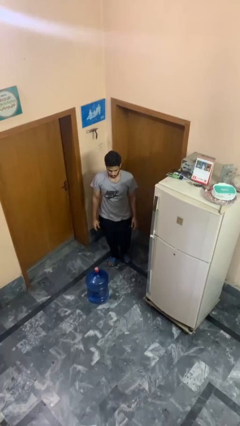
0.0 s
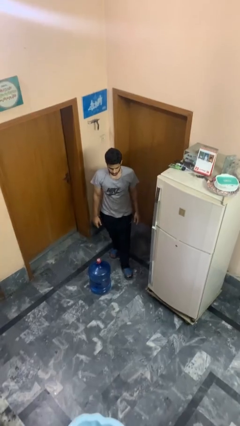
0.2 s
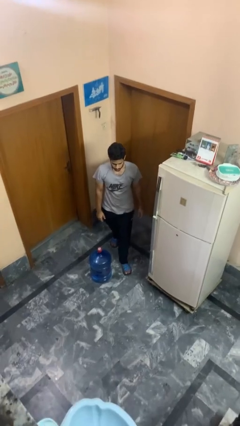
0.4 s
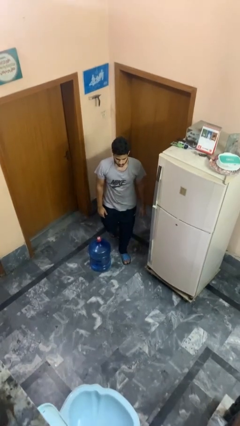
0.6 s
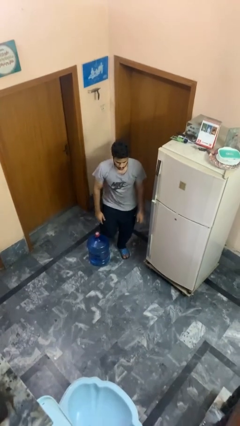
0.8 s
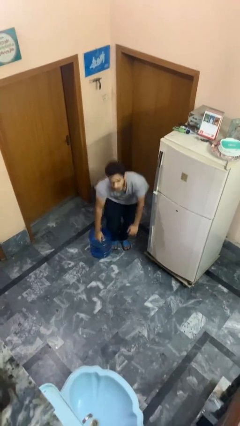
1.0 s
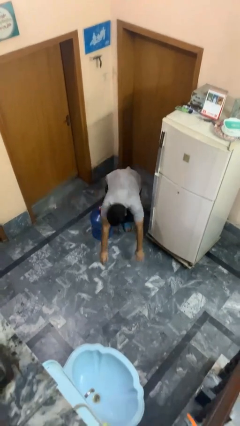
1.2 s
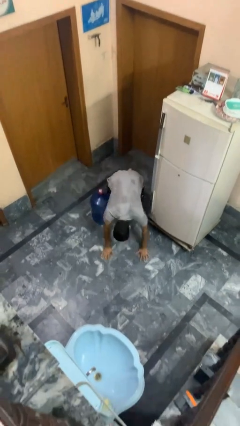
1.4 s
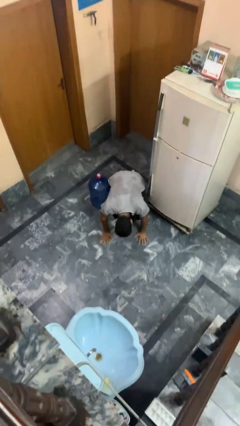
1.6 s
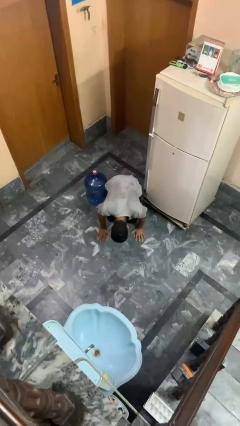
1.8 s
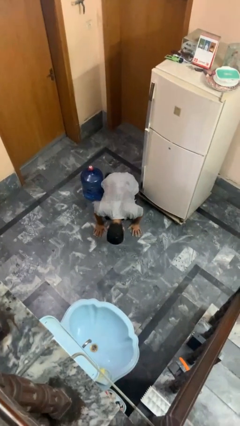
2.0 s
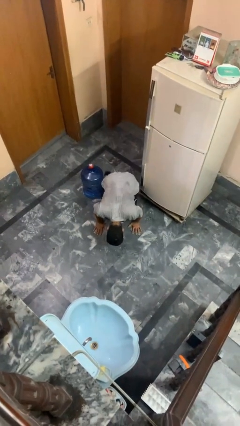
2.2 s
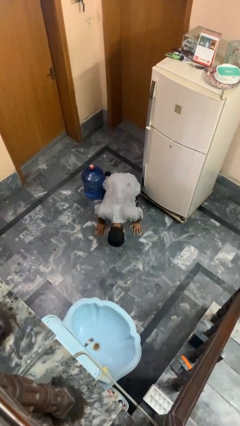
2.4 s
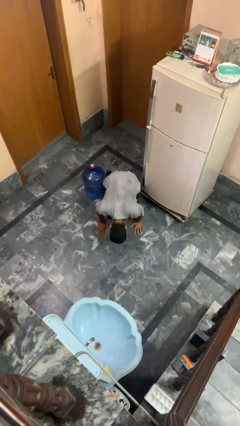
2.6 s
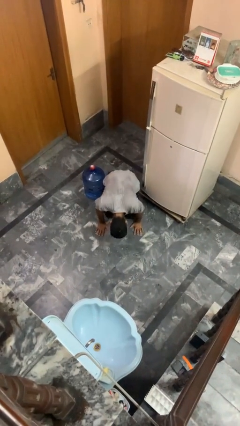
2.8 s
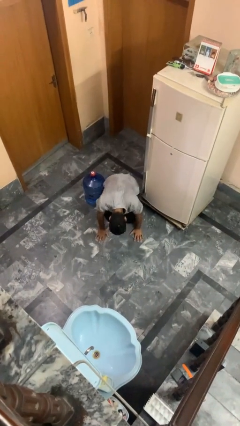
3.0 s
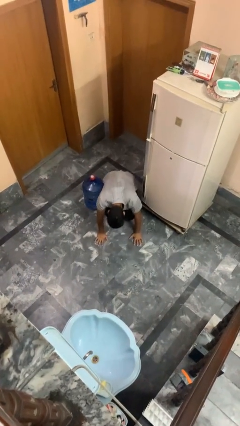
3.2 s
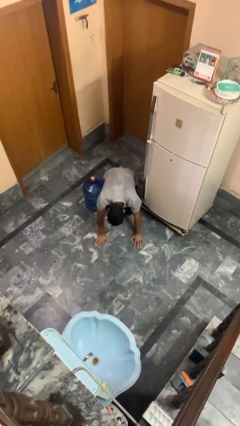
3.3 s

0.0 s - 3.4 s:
person trips on object on floor

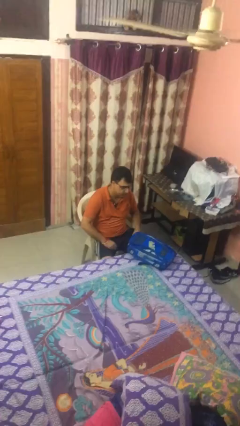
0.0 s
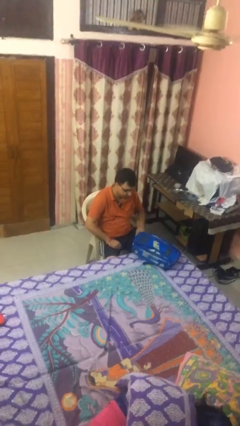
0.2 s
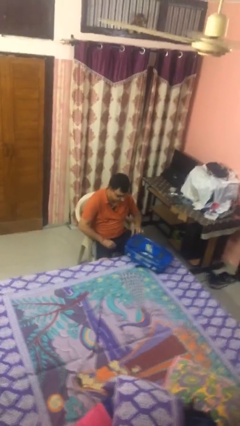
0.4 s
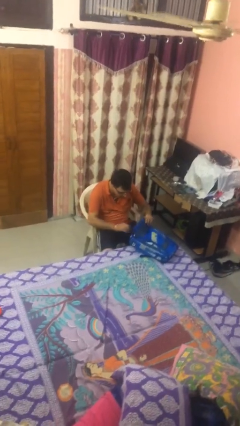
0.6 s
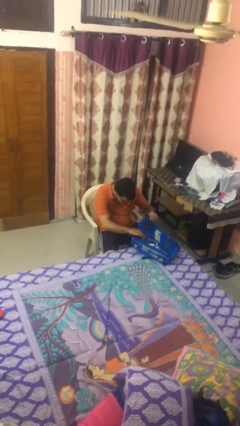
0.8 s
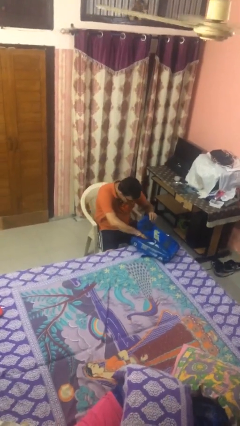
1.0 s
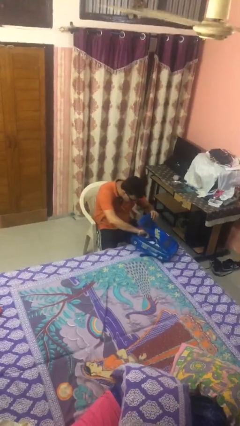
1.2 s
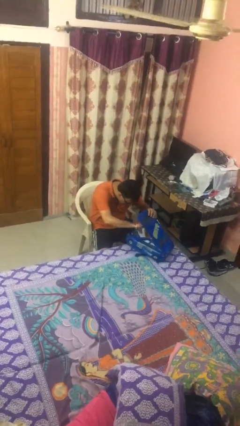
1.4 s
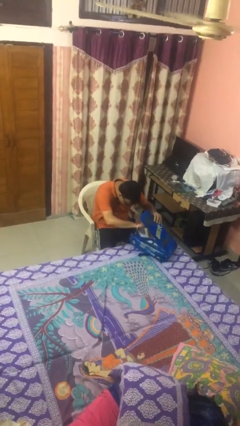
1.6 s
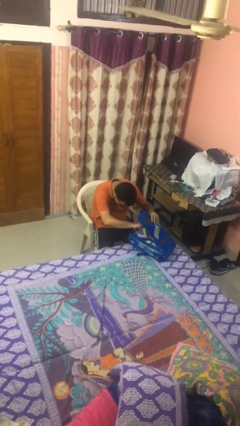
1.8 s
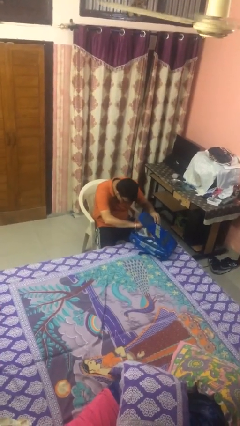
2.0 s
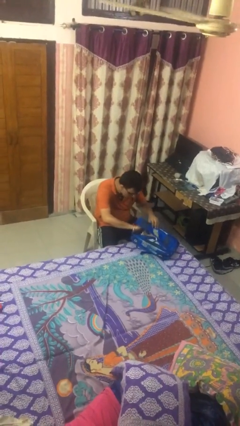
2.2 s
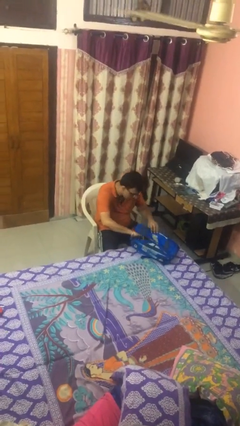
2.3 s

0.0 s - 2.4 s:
person searches in bag

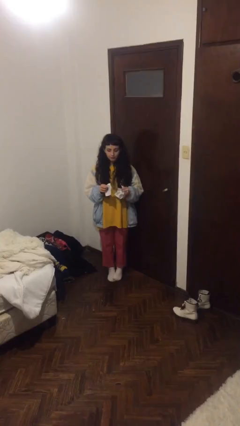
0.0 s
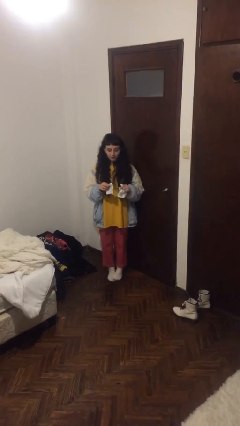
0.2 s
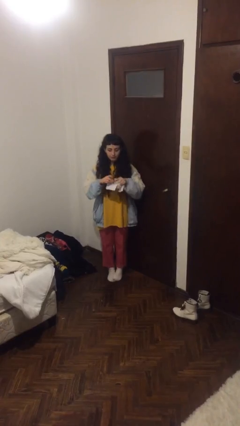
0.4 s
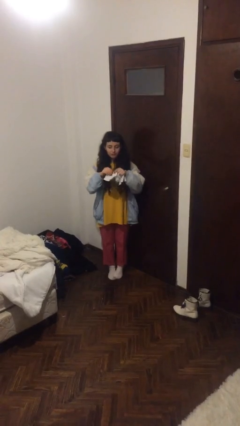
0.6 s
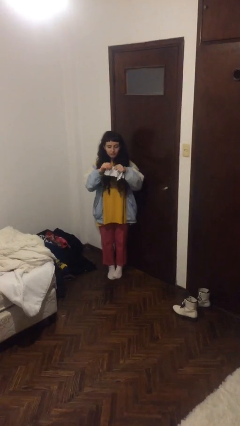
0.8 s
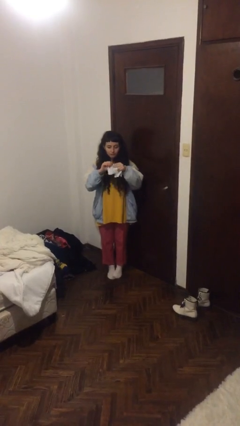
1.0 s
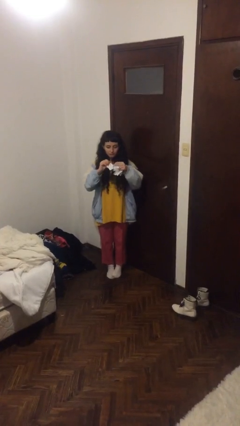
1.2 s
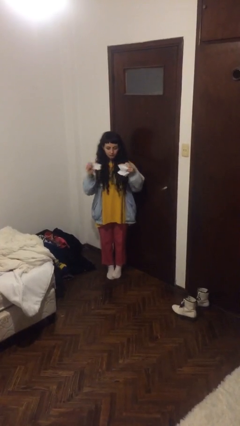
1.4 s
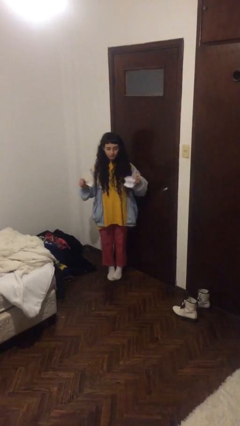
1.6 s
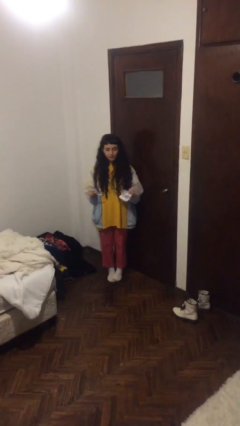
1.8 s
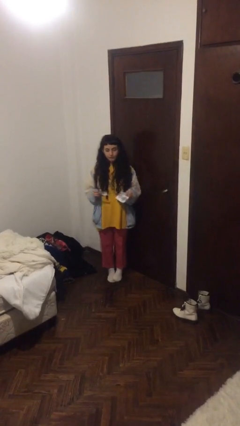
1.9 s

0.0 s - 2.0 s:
person tears paper

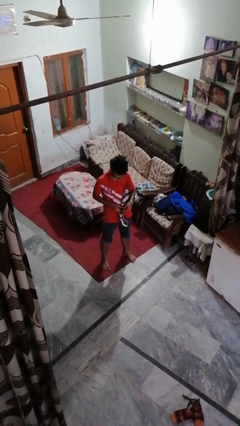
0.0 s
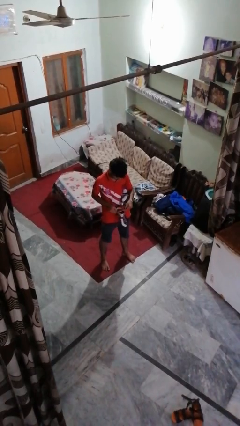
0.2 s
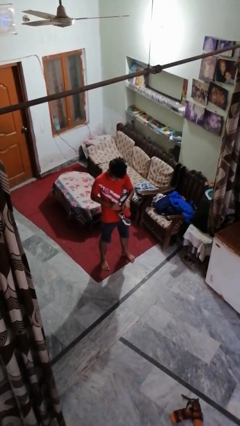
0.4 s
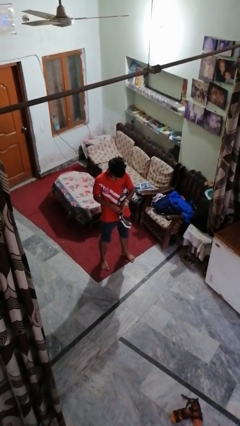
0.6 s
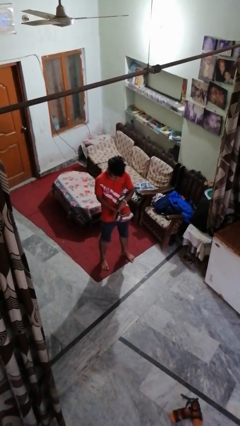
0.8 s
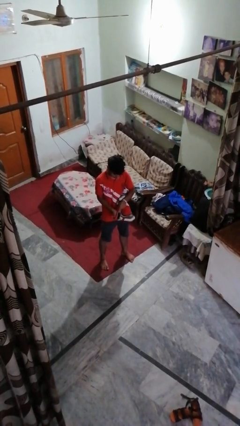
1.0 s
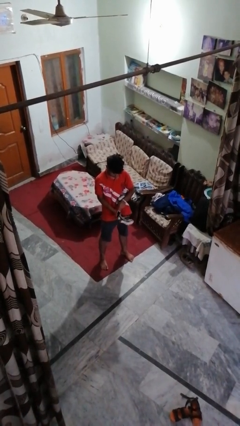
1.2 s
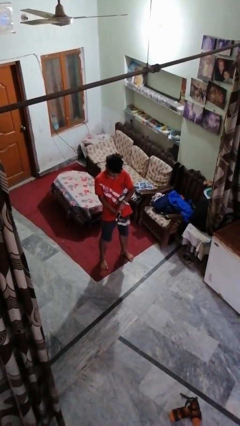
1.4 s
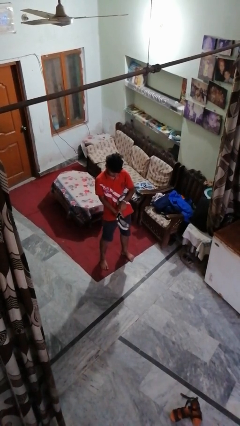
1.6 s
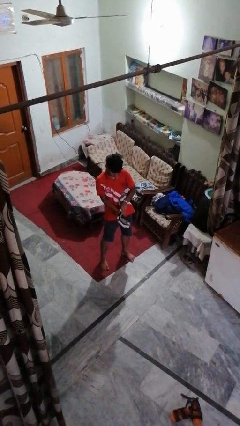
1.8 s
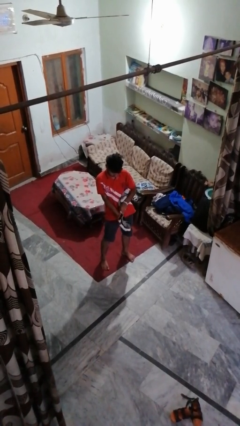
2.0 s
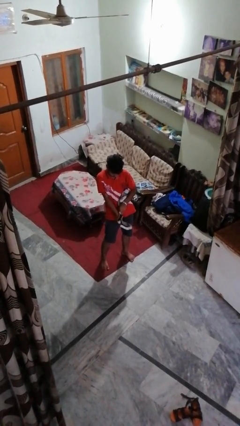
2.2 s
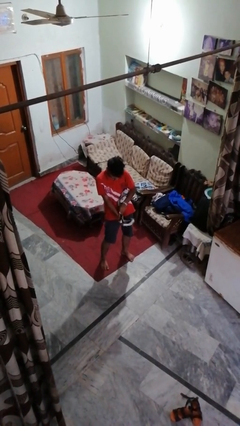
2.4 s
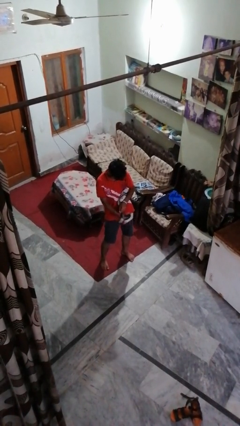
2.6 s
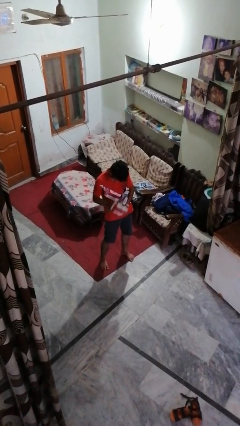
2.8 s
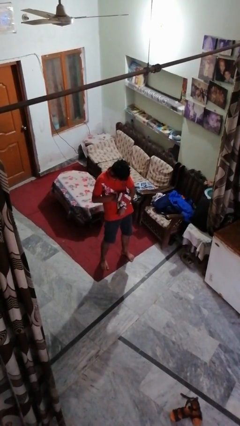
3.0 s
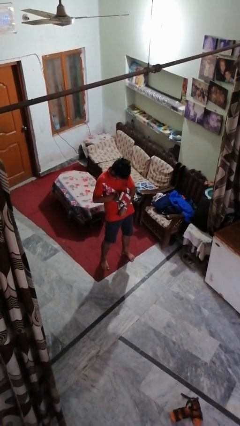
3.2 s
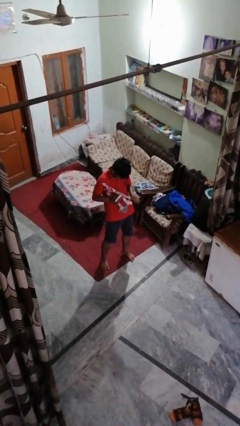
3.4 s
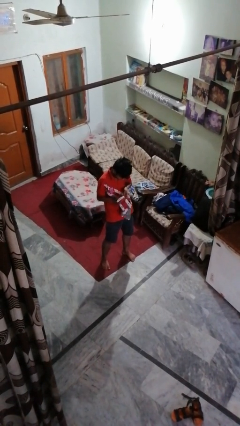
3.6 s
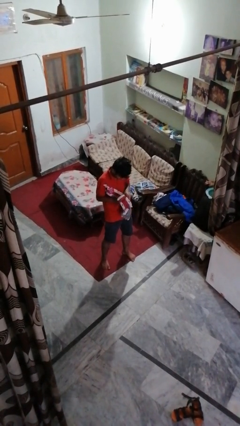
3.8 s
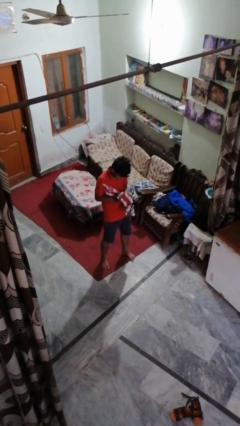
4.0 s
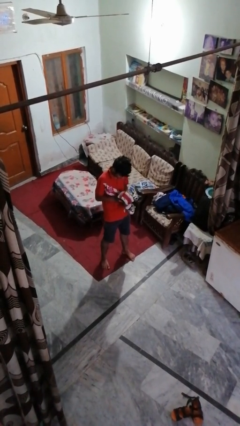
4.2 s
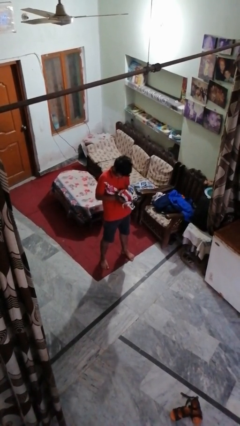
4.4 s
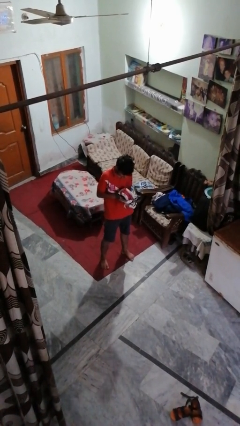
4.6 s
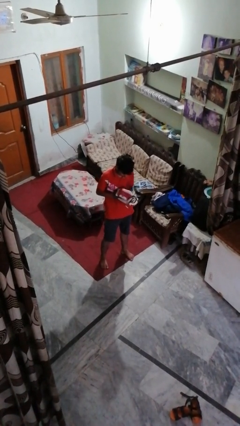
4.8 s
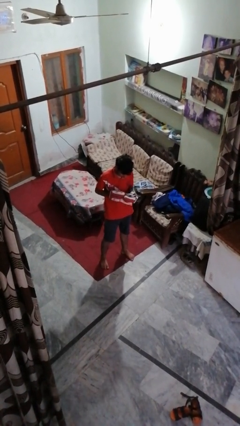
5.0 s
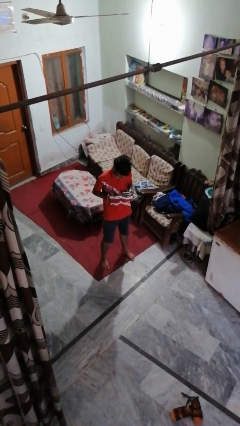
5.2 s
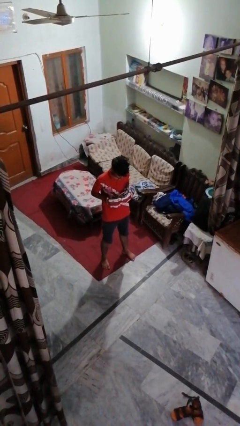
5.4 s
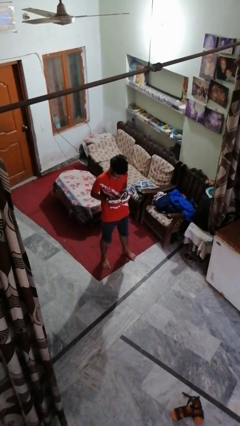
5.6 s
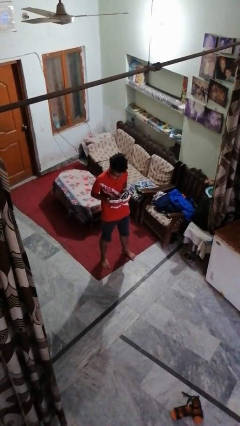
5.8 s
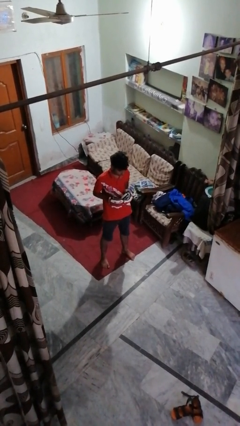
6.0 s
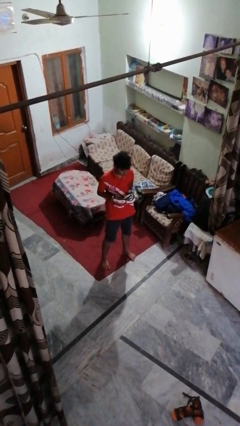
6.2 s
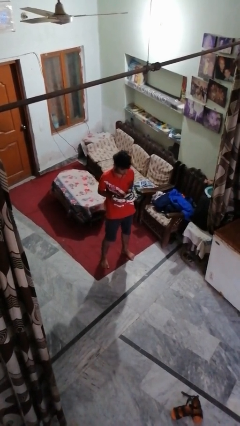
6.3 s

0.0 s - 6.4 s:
person puts on gloves

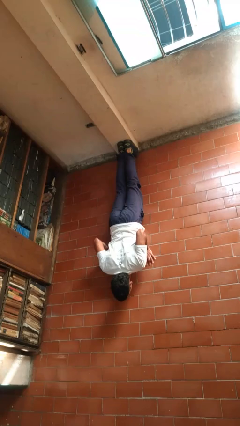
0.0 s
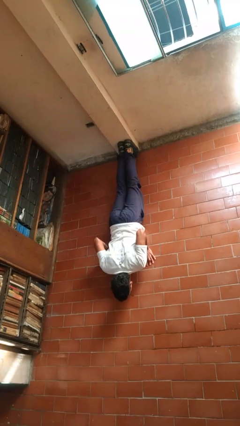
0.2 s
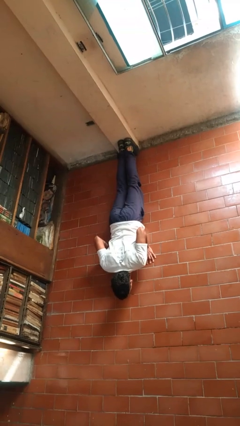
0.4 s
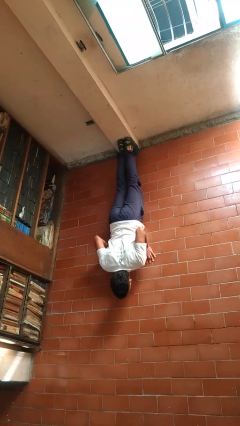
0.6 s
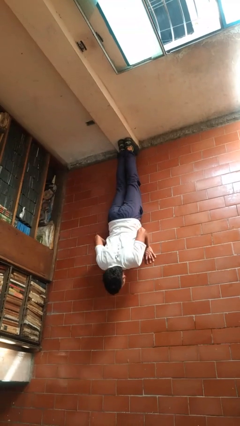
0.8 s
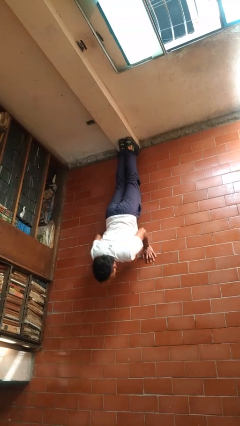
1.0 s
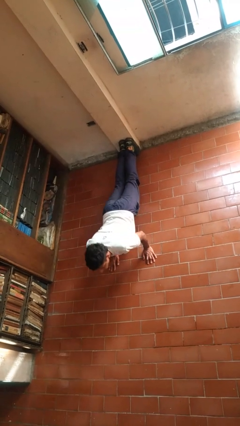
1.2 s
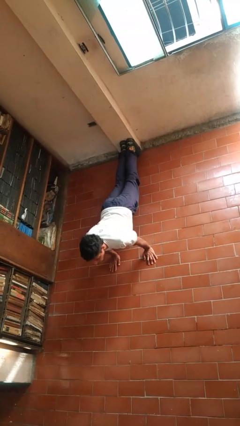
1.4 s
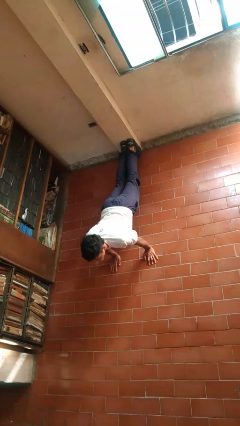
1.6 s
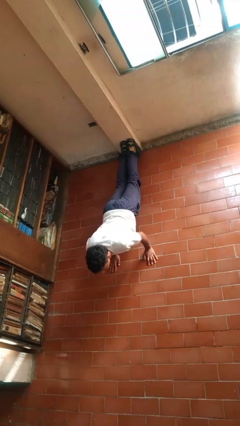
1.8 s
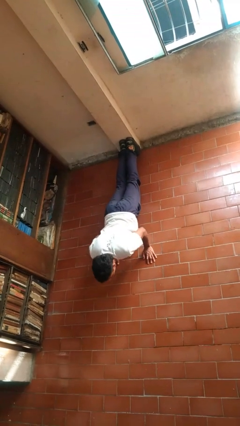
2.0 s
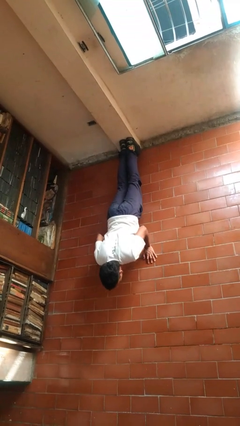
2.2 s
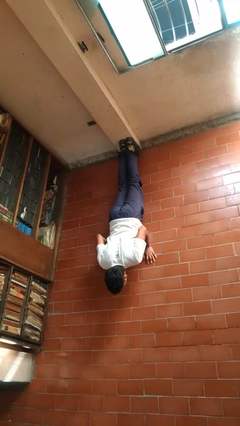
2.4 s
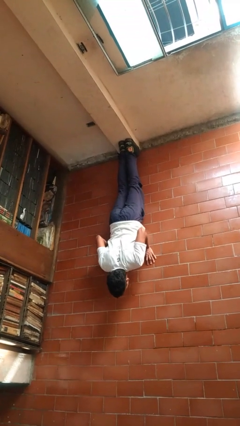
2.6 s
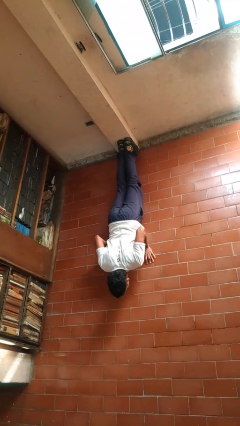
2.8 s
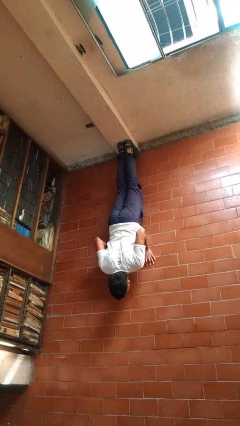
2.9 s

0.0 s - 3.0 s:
person exercises with pushup
